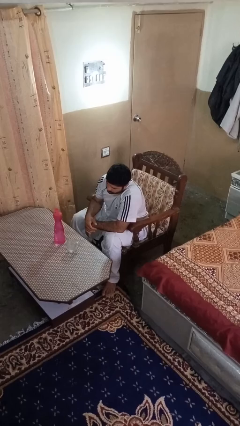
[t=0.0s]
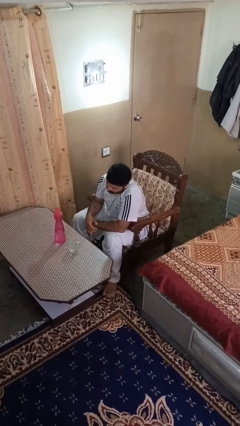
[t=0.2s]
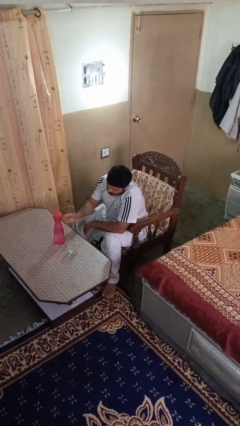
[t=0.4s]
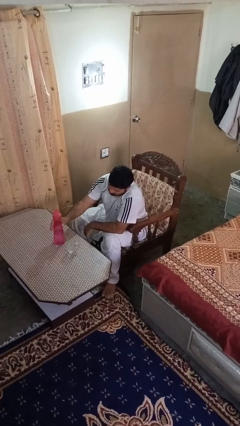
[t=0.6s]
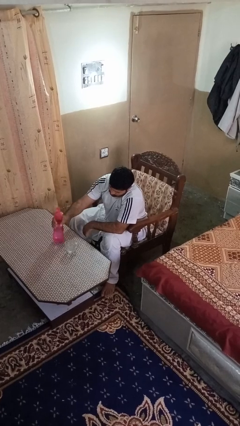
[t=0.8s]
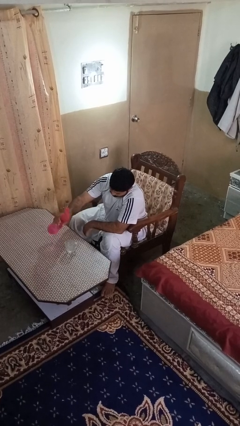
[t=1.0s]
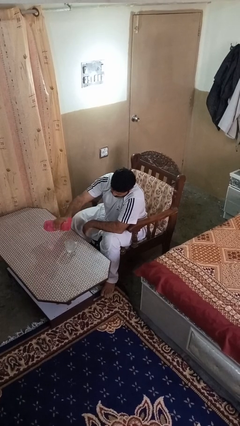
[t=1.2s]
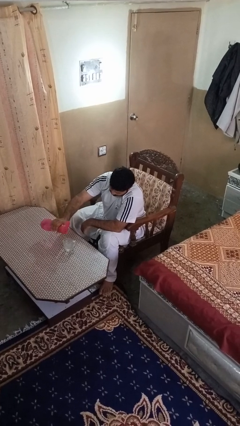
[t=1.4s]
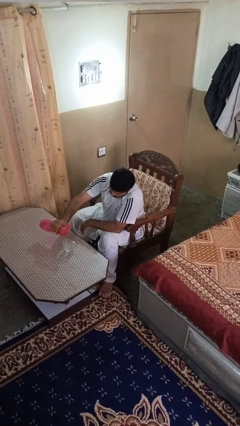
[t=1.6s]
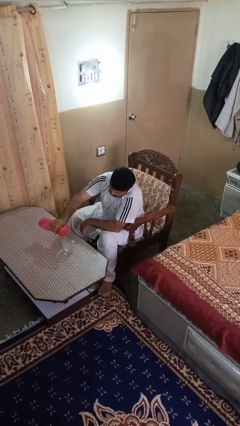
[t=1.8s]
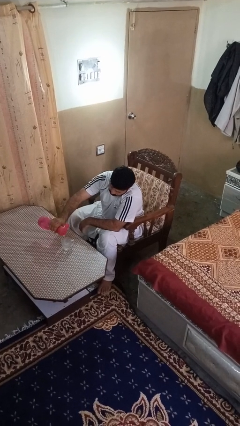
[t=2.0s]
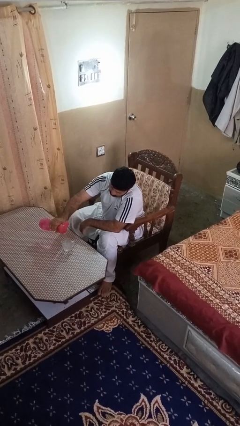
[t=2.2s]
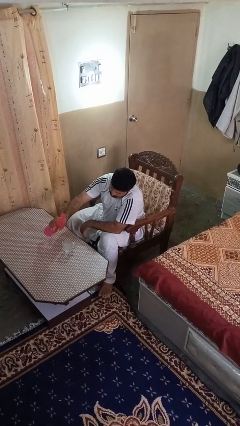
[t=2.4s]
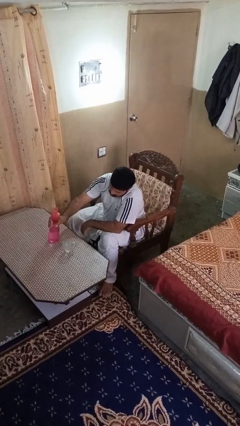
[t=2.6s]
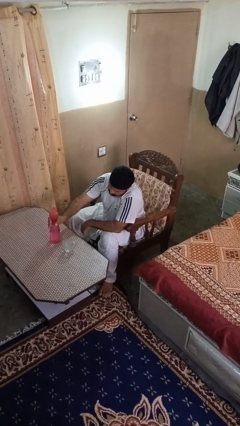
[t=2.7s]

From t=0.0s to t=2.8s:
person pours liquid into cup

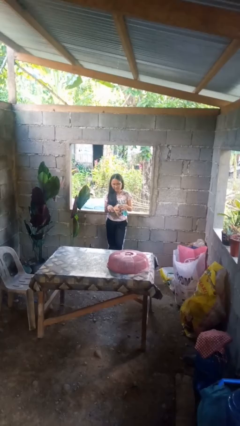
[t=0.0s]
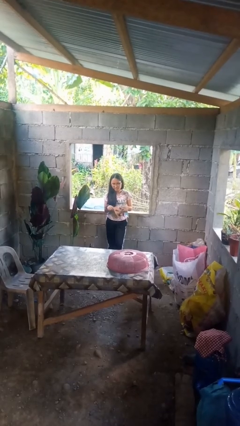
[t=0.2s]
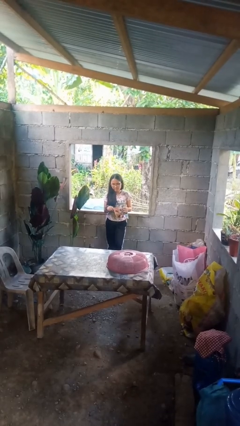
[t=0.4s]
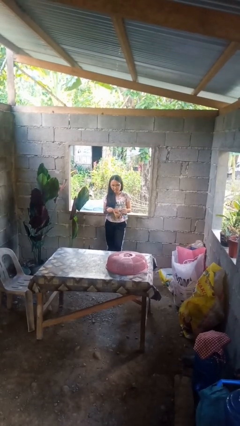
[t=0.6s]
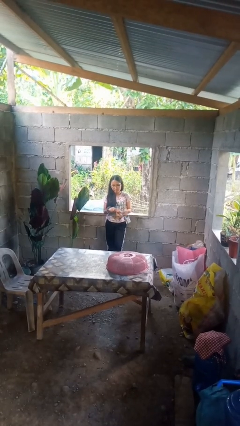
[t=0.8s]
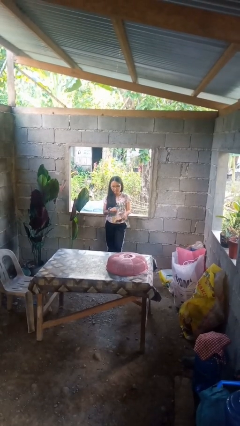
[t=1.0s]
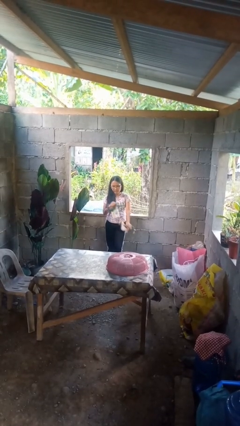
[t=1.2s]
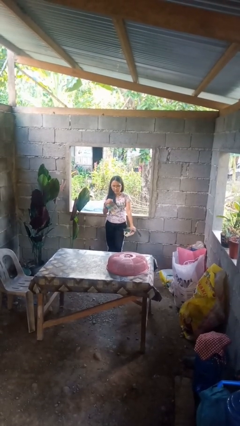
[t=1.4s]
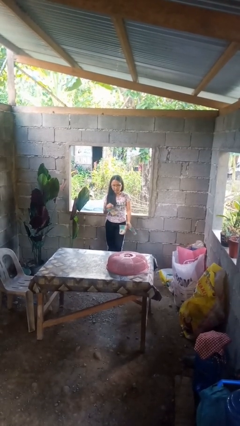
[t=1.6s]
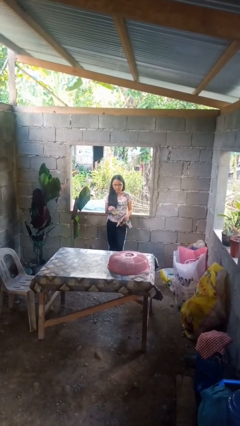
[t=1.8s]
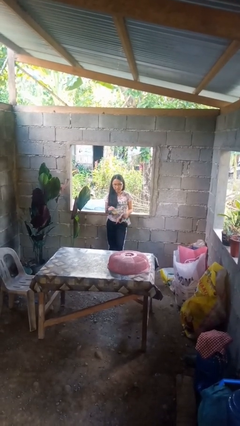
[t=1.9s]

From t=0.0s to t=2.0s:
person tears paper

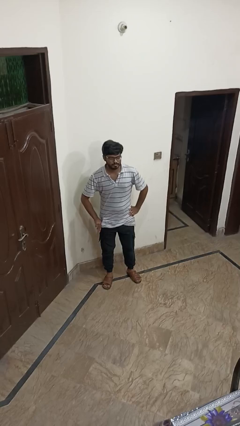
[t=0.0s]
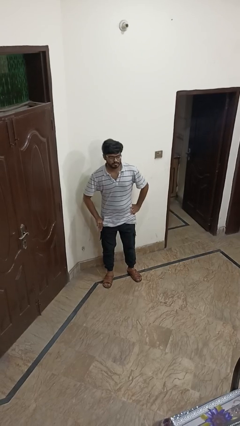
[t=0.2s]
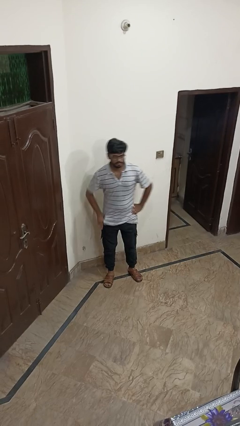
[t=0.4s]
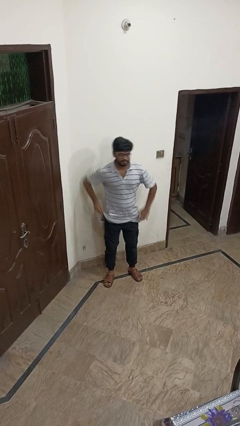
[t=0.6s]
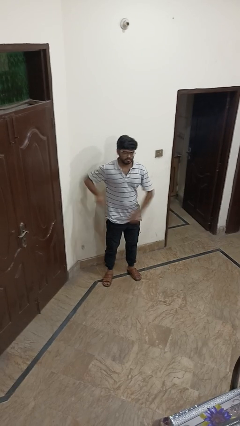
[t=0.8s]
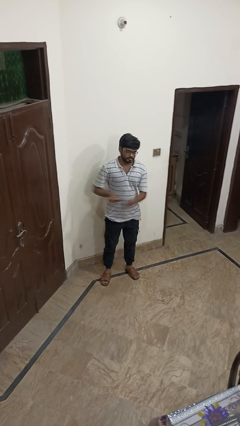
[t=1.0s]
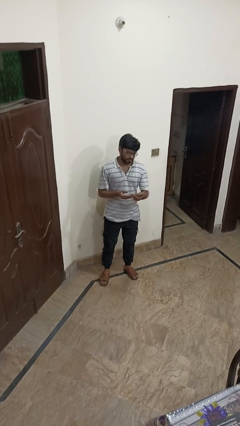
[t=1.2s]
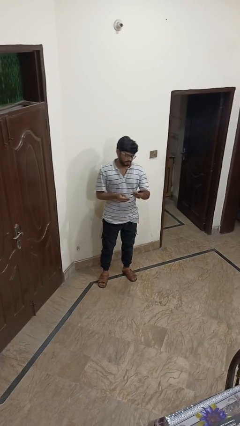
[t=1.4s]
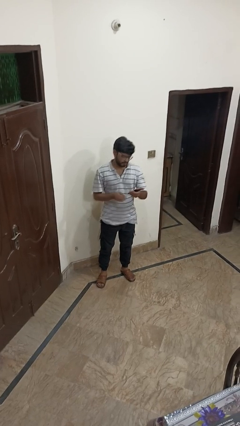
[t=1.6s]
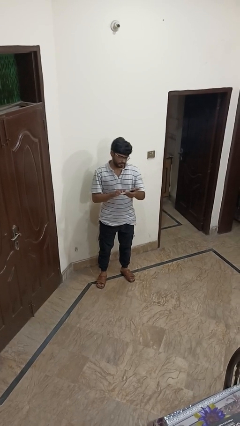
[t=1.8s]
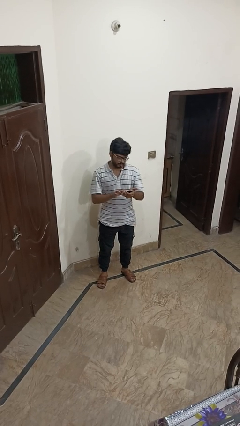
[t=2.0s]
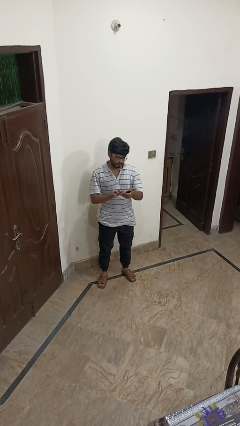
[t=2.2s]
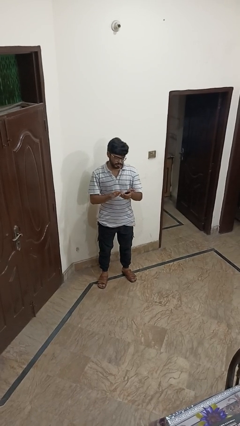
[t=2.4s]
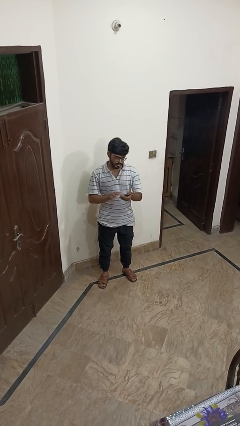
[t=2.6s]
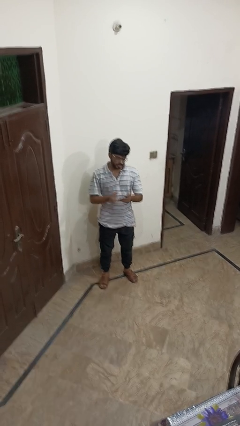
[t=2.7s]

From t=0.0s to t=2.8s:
person takes phone from pocket

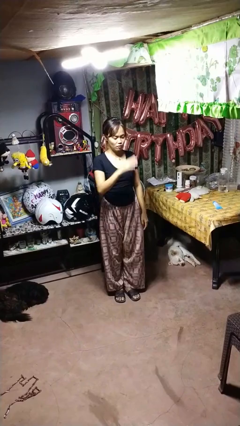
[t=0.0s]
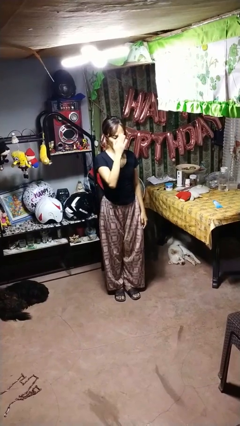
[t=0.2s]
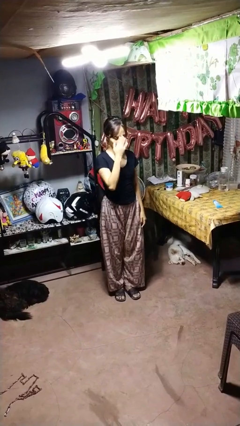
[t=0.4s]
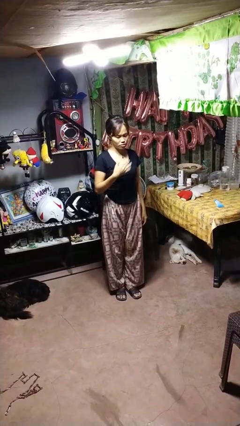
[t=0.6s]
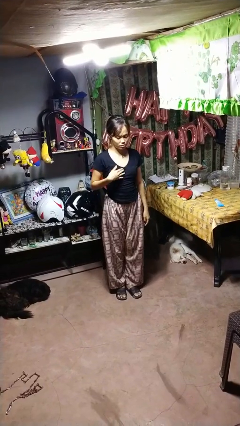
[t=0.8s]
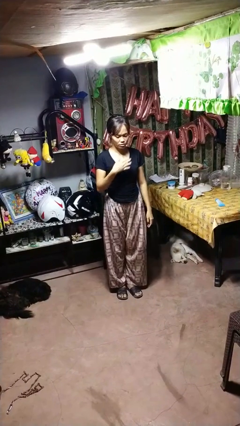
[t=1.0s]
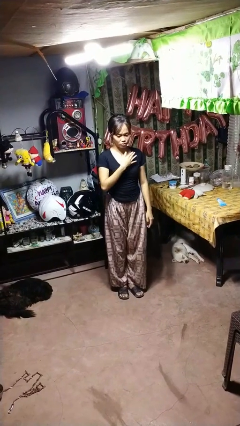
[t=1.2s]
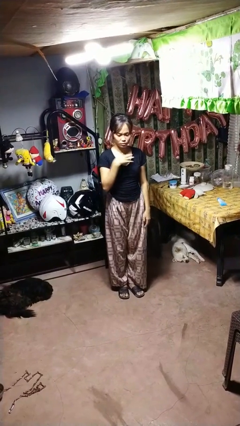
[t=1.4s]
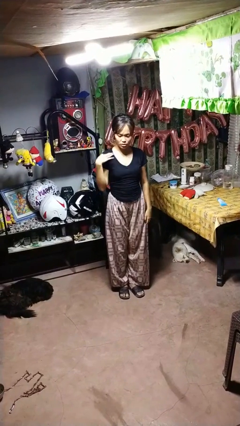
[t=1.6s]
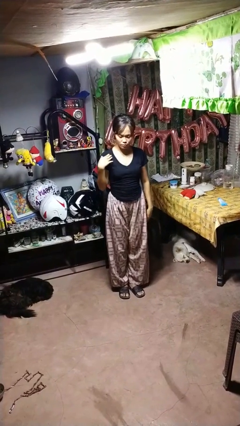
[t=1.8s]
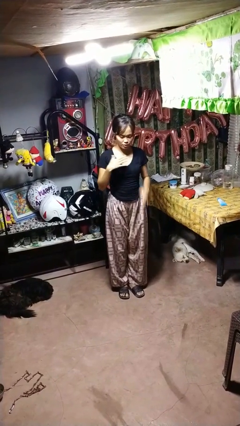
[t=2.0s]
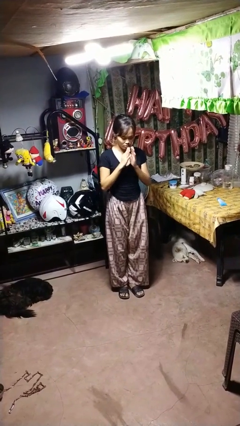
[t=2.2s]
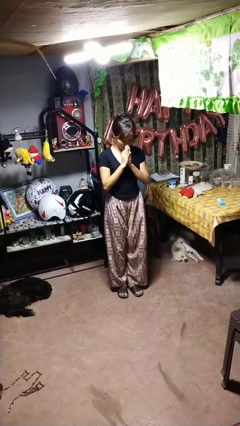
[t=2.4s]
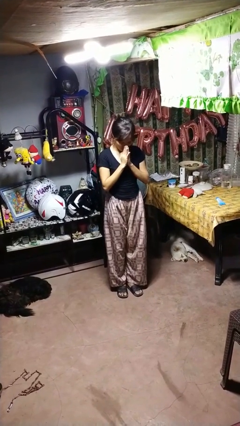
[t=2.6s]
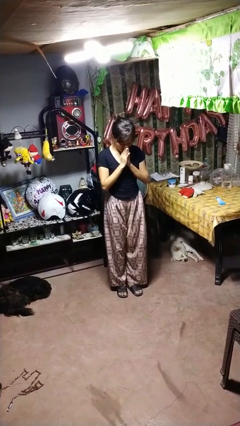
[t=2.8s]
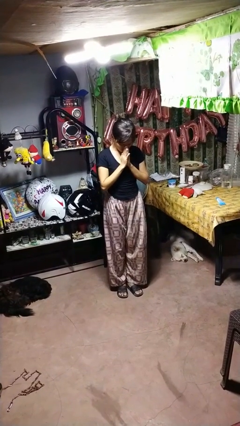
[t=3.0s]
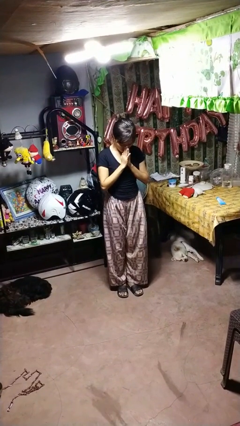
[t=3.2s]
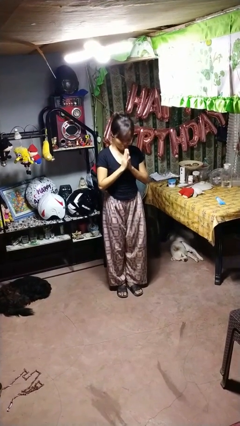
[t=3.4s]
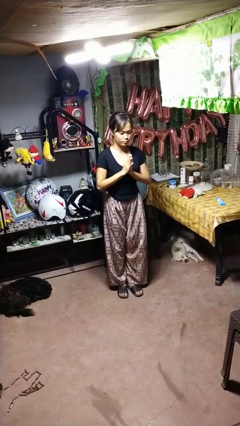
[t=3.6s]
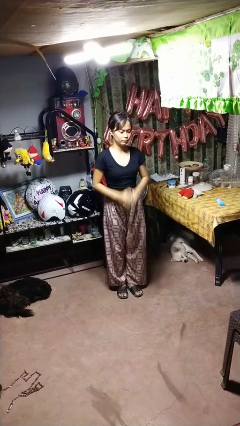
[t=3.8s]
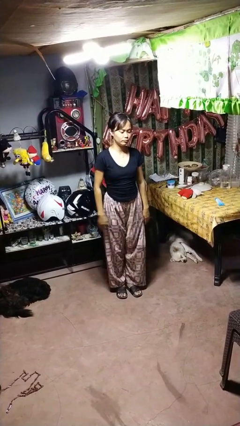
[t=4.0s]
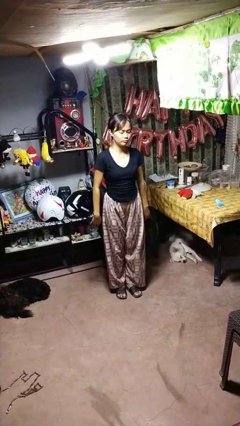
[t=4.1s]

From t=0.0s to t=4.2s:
person prays

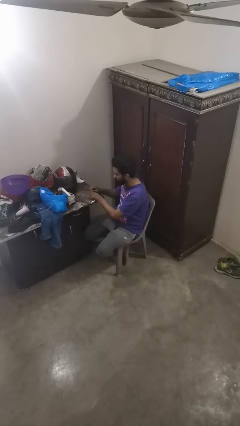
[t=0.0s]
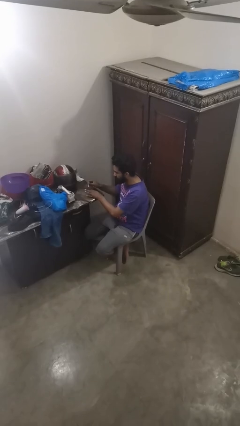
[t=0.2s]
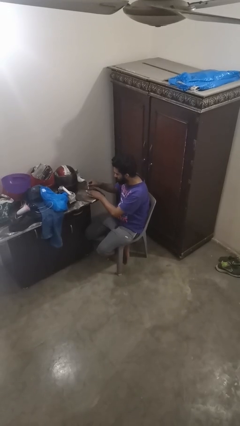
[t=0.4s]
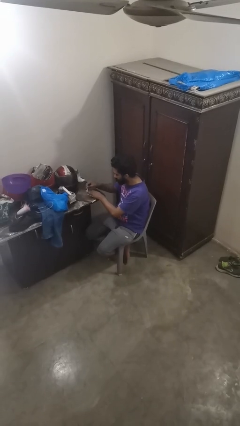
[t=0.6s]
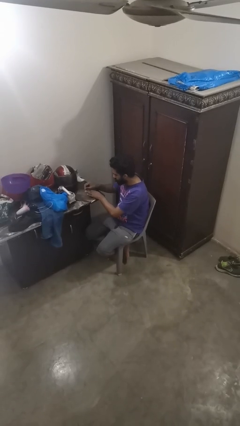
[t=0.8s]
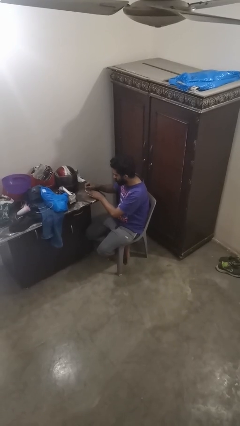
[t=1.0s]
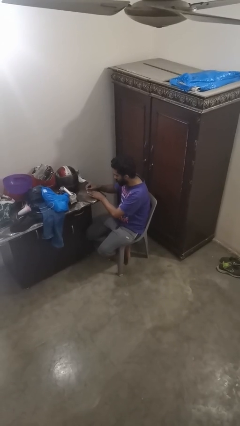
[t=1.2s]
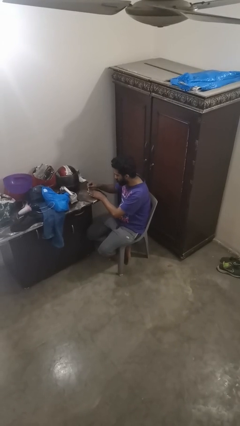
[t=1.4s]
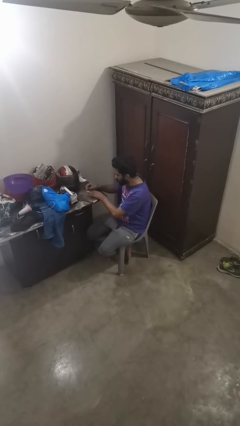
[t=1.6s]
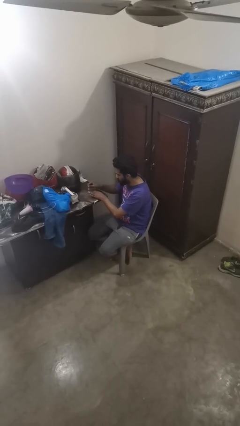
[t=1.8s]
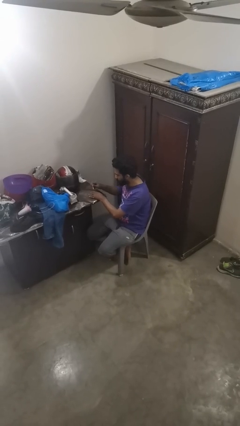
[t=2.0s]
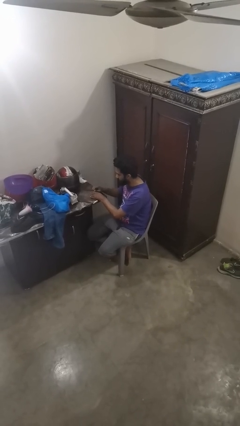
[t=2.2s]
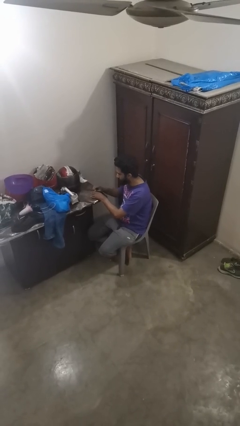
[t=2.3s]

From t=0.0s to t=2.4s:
person paints fingernails

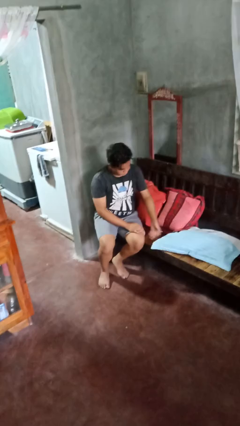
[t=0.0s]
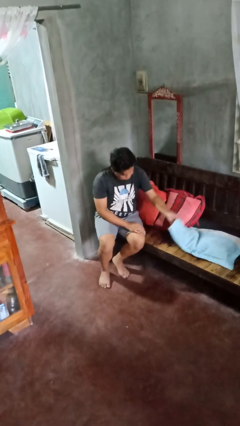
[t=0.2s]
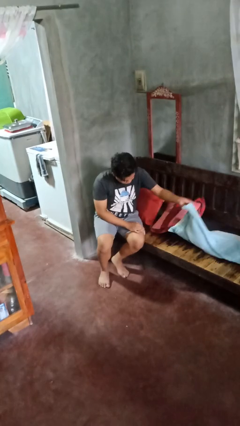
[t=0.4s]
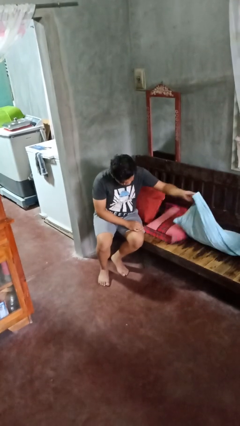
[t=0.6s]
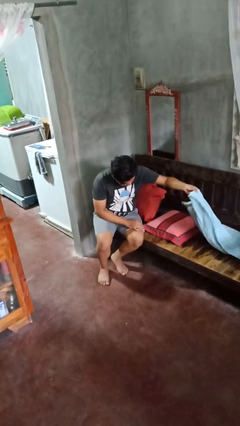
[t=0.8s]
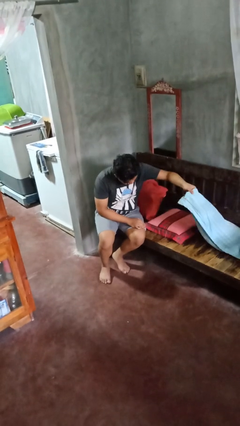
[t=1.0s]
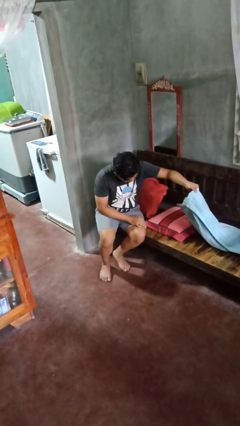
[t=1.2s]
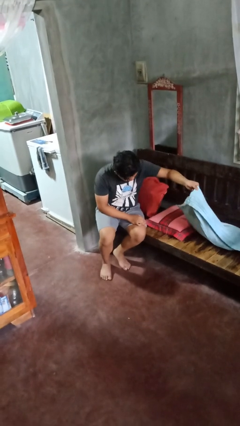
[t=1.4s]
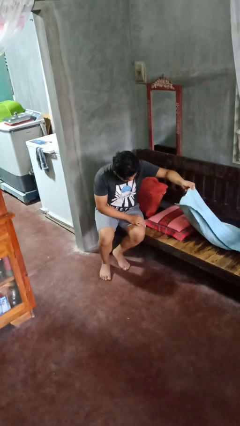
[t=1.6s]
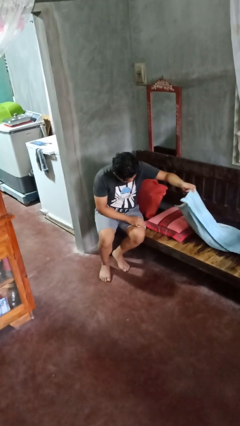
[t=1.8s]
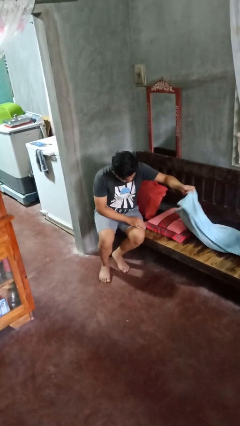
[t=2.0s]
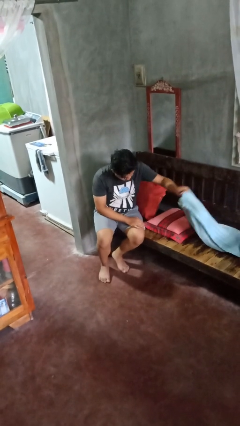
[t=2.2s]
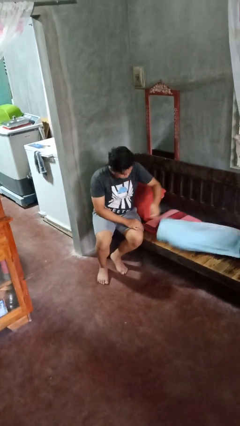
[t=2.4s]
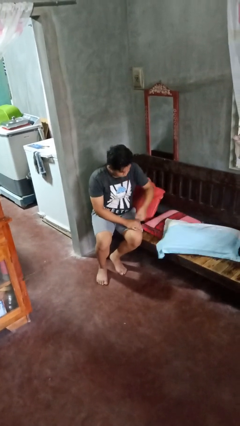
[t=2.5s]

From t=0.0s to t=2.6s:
person searches in couch

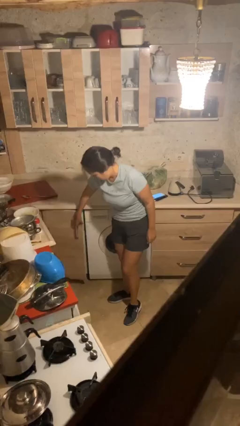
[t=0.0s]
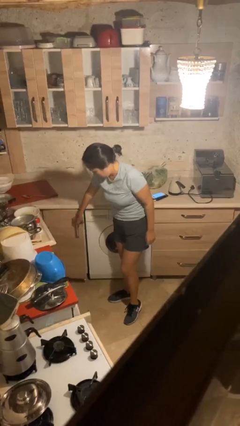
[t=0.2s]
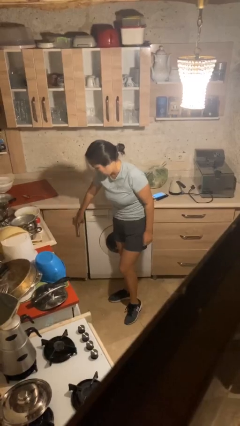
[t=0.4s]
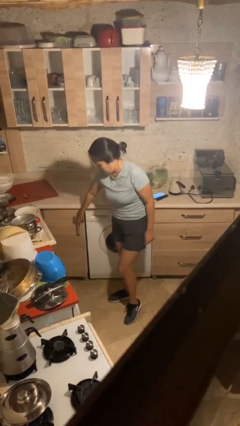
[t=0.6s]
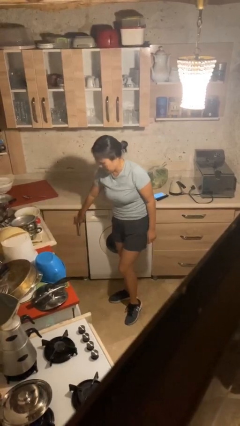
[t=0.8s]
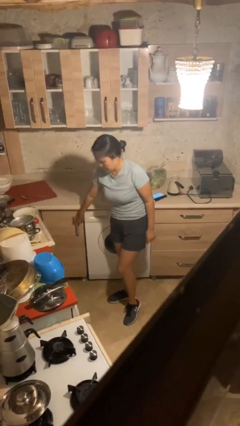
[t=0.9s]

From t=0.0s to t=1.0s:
person closes cabinet
